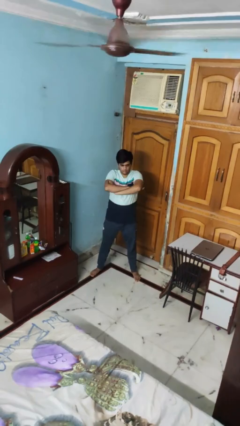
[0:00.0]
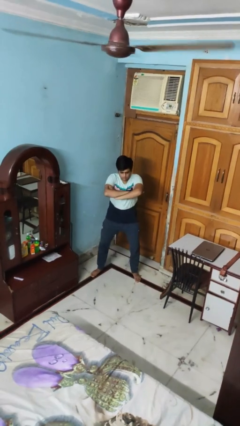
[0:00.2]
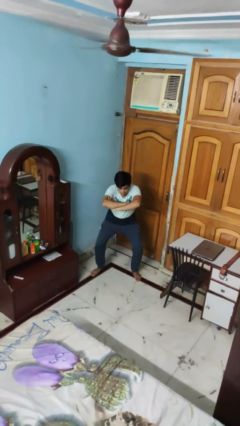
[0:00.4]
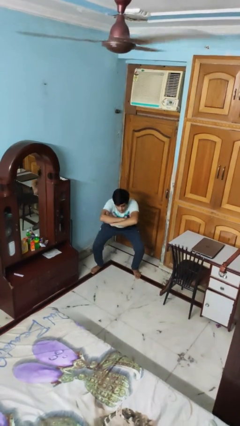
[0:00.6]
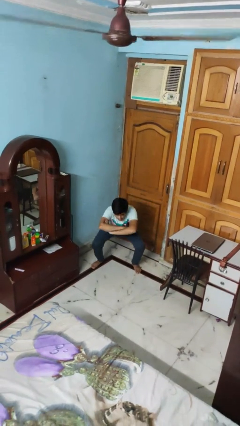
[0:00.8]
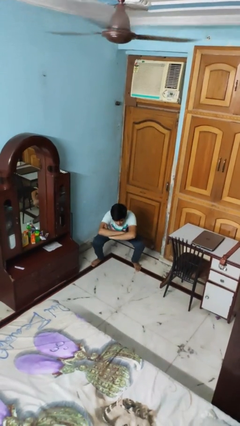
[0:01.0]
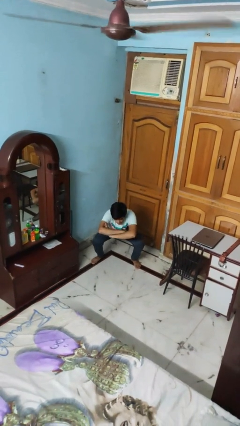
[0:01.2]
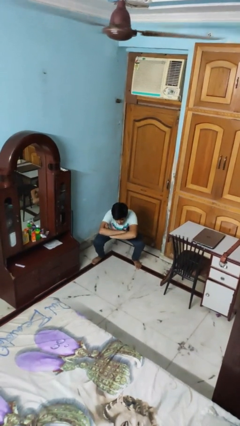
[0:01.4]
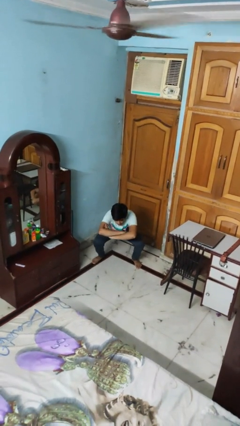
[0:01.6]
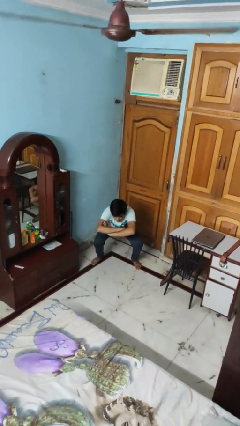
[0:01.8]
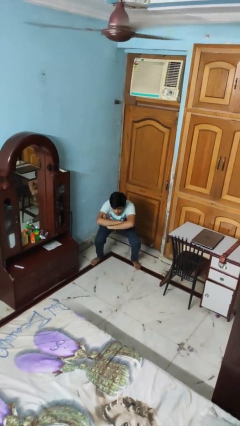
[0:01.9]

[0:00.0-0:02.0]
person squats

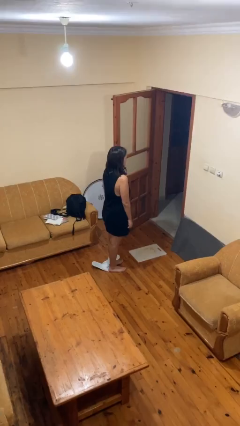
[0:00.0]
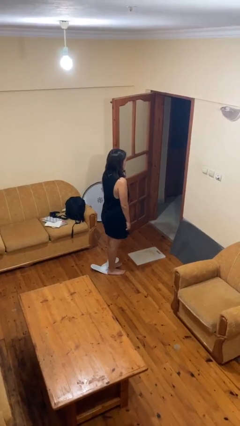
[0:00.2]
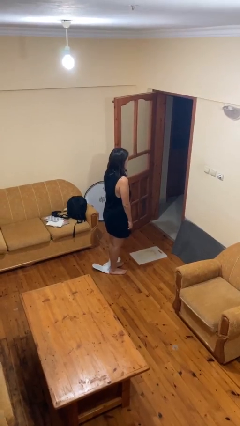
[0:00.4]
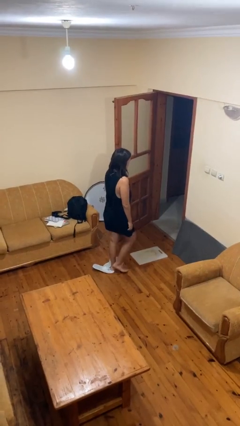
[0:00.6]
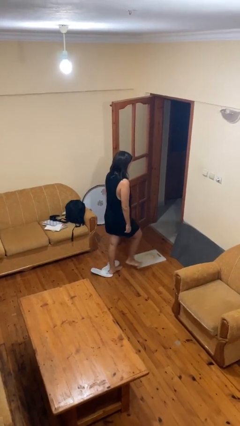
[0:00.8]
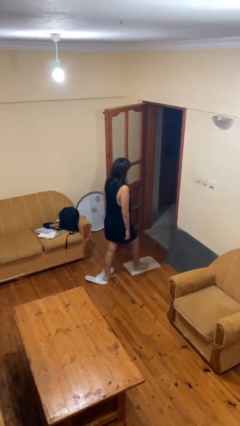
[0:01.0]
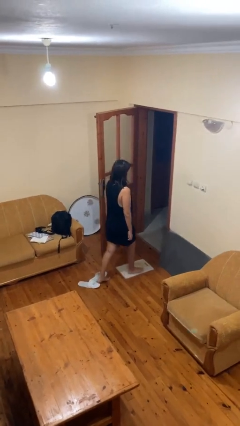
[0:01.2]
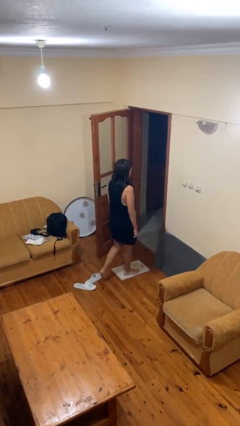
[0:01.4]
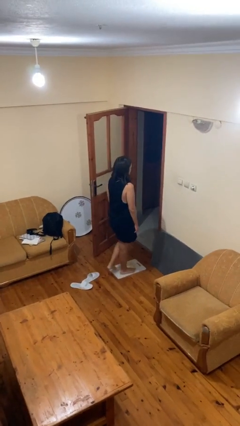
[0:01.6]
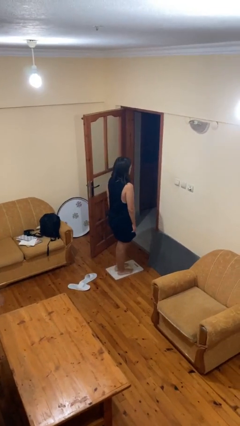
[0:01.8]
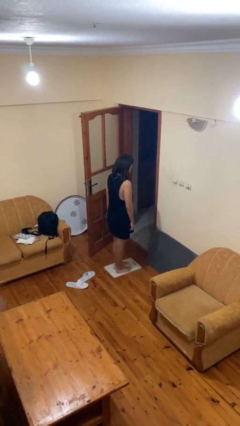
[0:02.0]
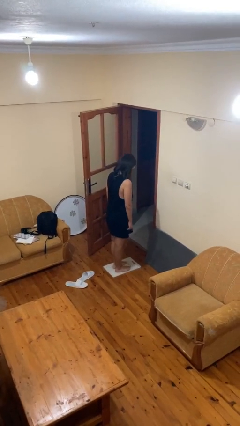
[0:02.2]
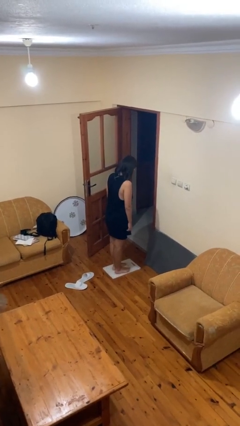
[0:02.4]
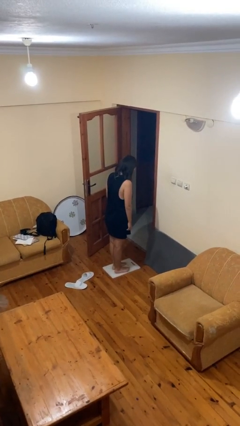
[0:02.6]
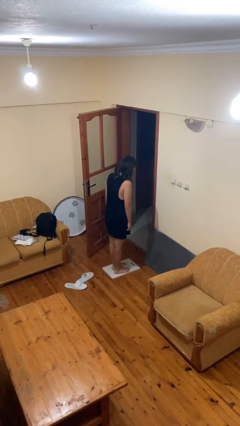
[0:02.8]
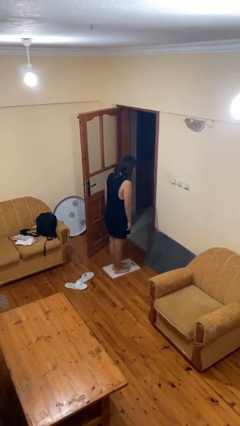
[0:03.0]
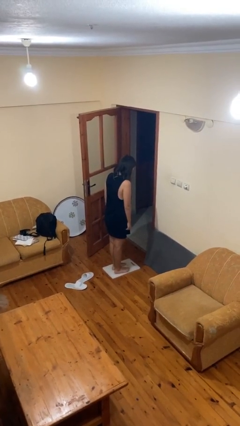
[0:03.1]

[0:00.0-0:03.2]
person uses bodyweight scale

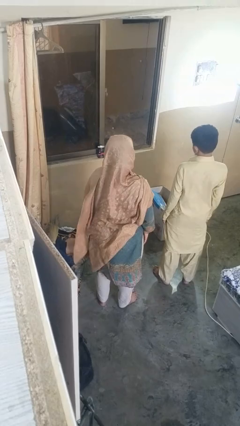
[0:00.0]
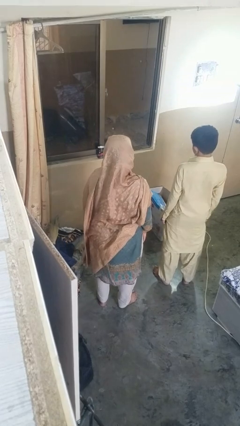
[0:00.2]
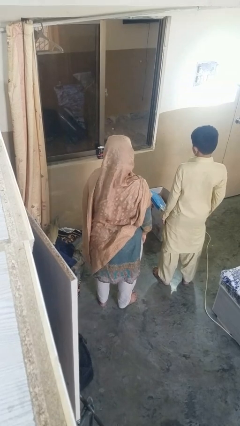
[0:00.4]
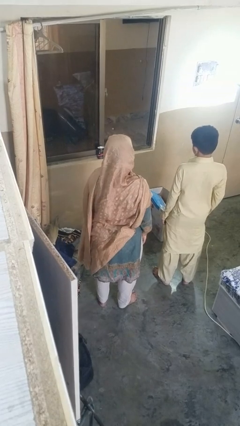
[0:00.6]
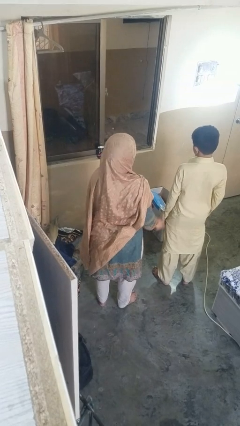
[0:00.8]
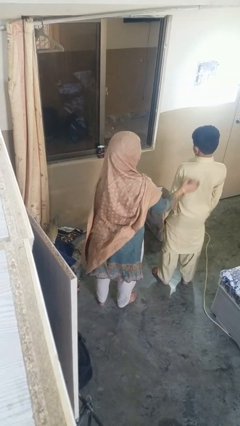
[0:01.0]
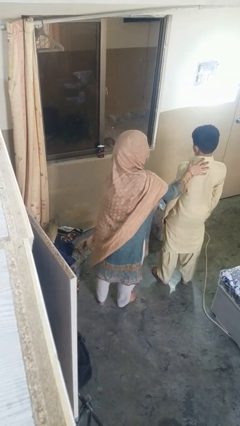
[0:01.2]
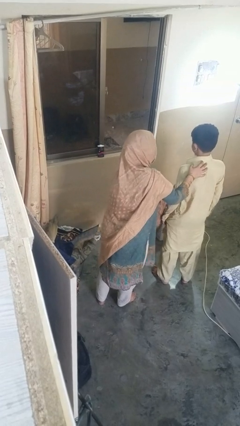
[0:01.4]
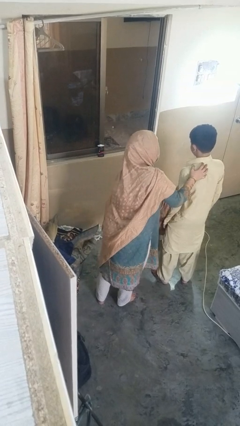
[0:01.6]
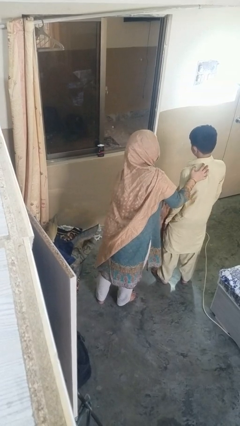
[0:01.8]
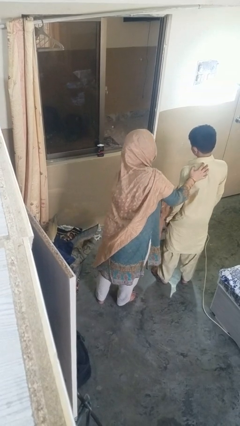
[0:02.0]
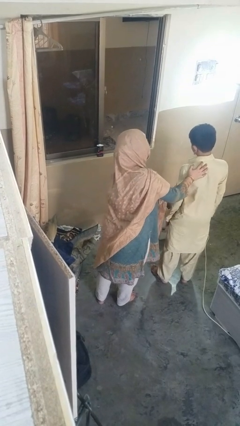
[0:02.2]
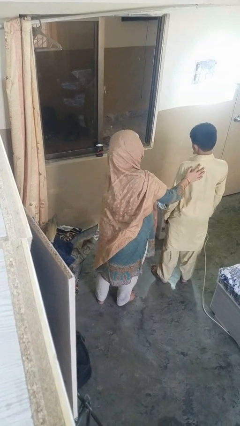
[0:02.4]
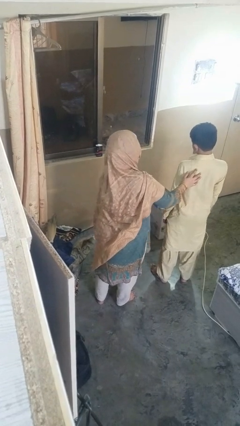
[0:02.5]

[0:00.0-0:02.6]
person laughs with person

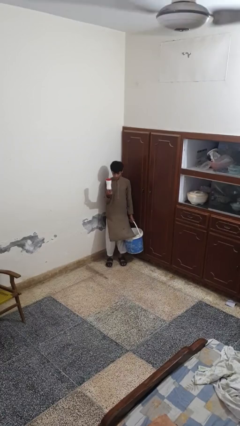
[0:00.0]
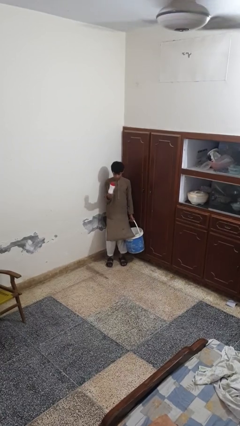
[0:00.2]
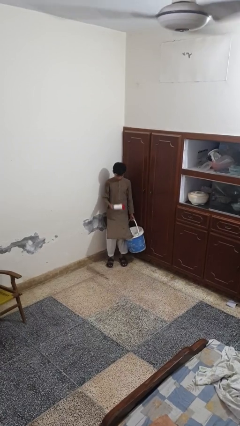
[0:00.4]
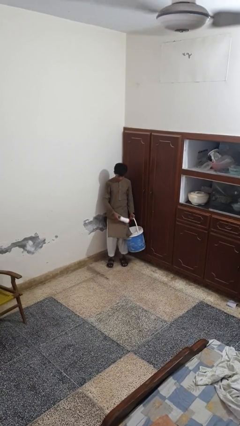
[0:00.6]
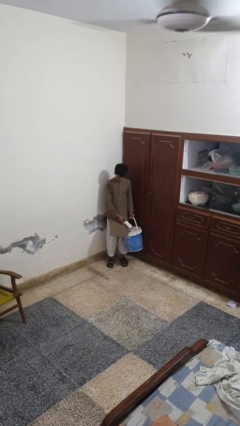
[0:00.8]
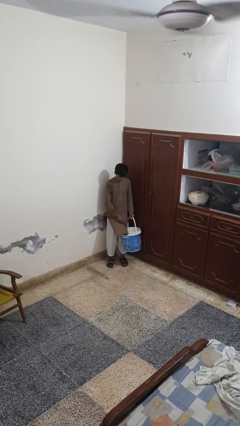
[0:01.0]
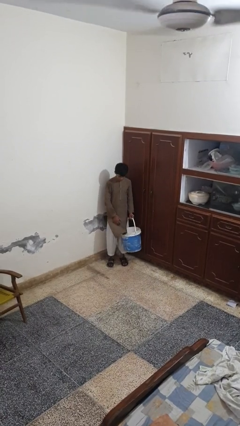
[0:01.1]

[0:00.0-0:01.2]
person puts object into basket

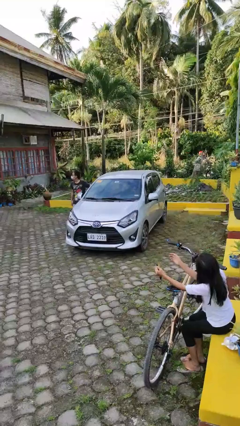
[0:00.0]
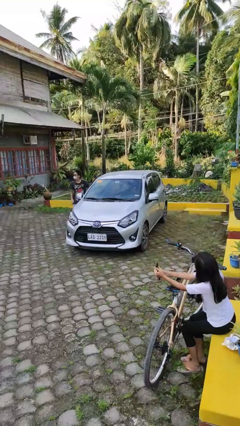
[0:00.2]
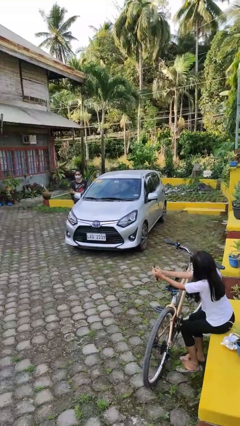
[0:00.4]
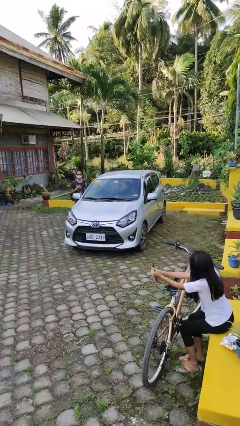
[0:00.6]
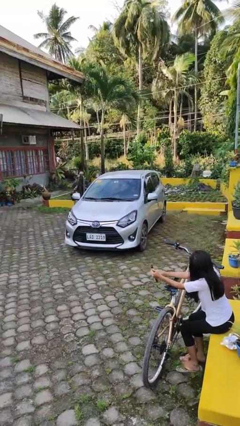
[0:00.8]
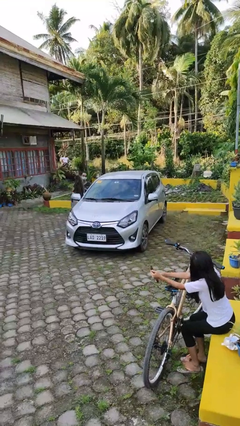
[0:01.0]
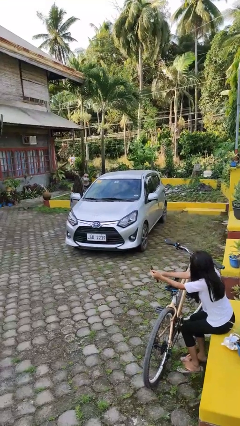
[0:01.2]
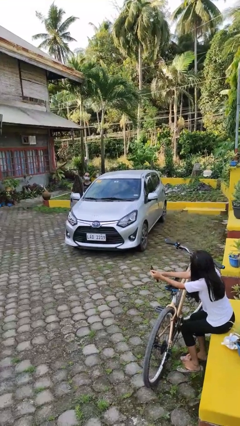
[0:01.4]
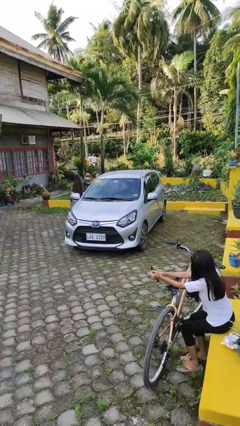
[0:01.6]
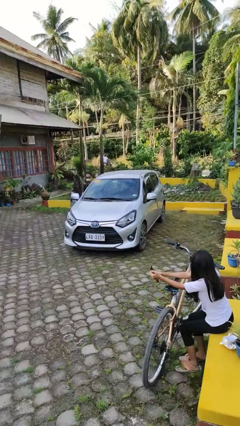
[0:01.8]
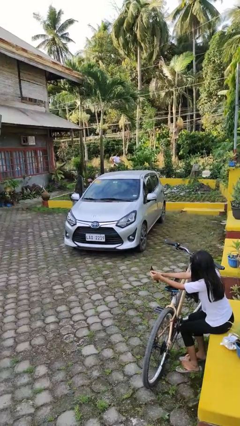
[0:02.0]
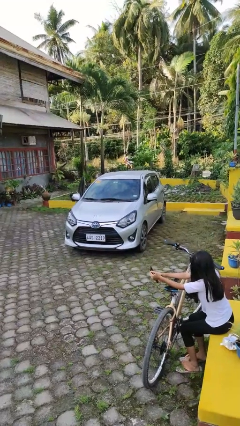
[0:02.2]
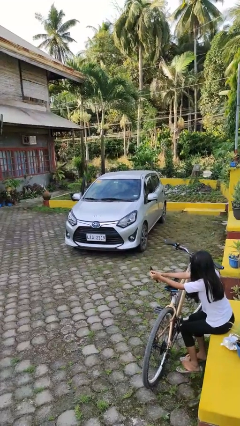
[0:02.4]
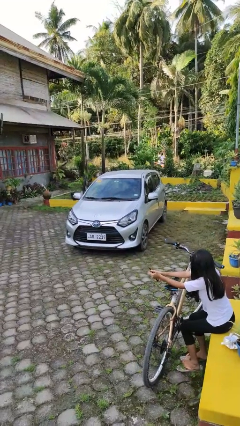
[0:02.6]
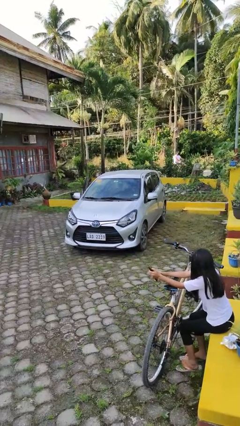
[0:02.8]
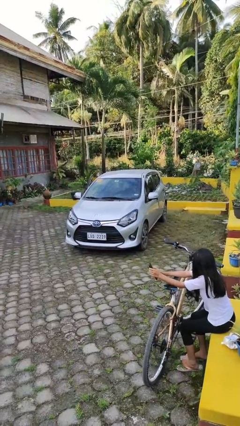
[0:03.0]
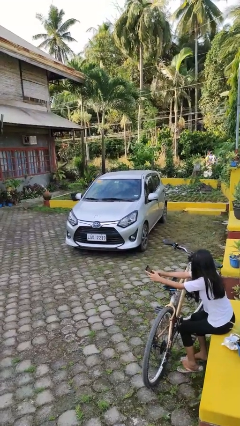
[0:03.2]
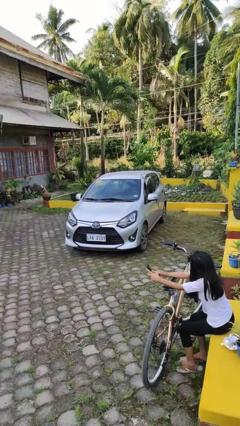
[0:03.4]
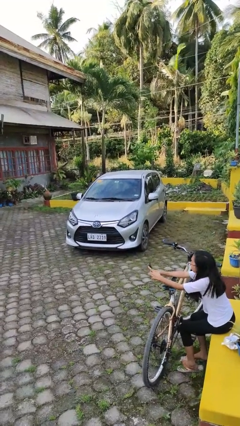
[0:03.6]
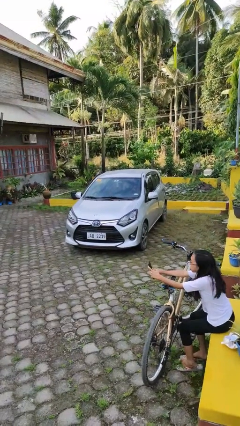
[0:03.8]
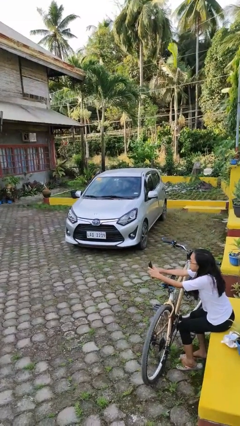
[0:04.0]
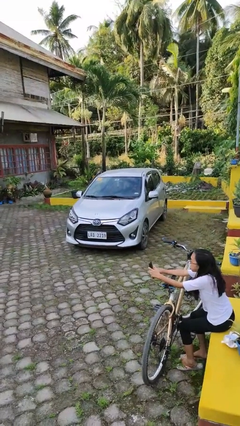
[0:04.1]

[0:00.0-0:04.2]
car picks up person

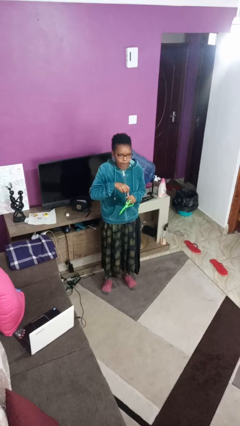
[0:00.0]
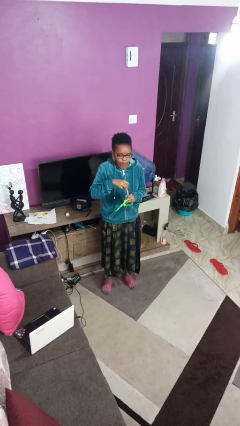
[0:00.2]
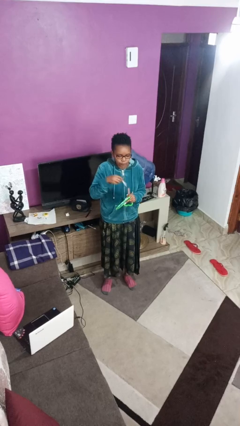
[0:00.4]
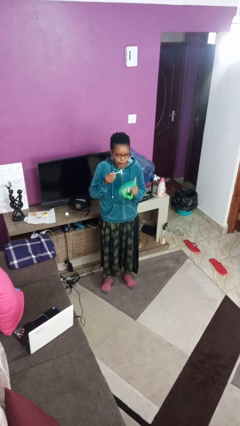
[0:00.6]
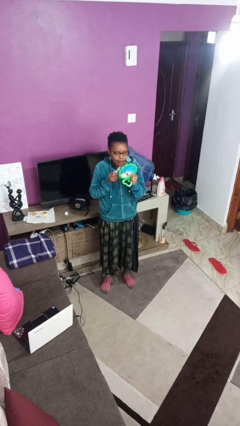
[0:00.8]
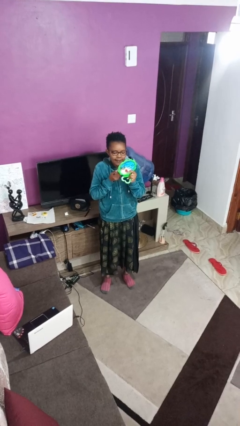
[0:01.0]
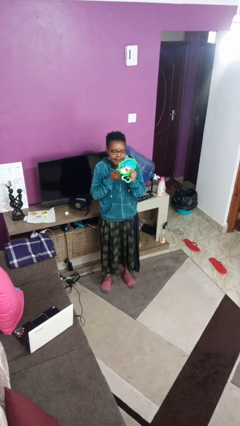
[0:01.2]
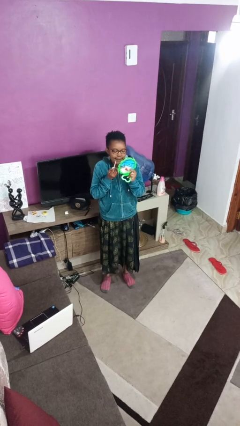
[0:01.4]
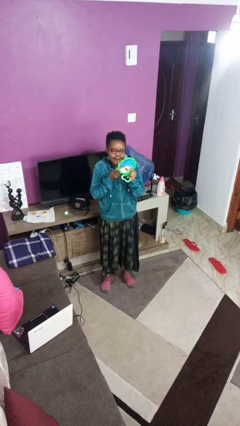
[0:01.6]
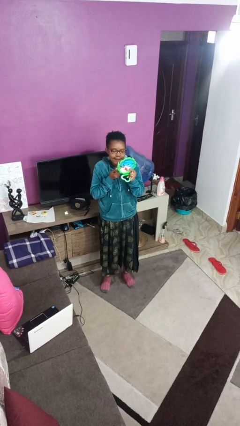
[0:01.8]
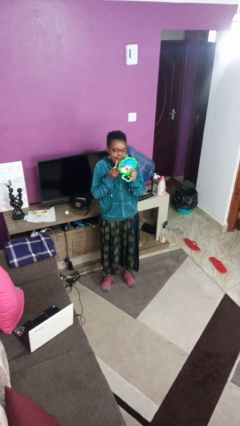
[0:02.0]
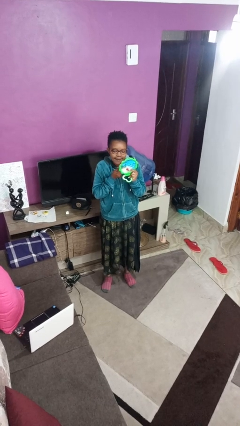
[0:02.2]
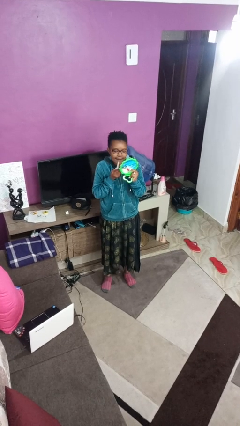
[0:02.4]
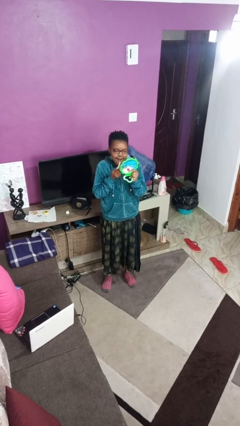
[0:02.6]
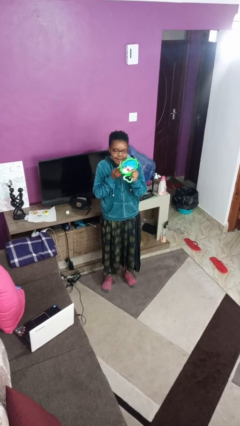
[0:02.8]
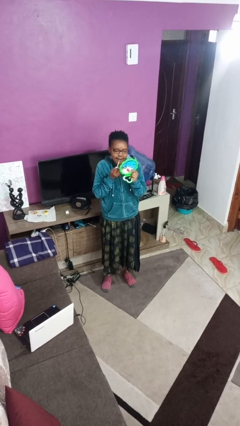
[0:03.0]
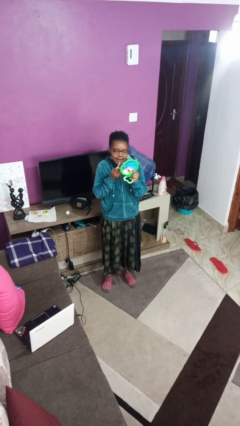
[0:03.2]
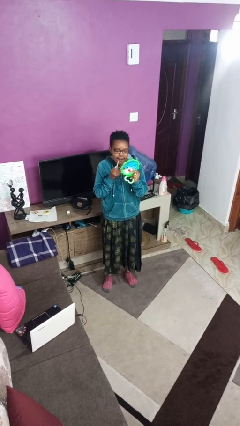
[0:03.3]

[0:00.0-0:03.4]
person applies lip makeup

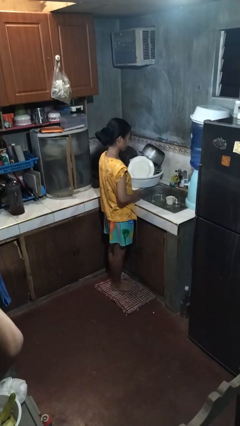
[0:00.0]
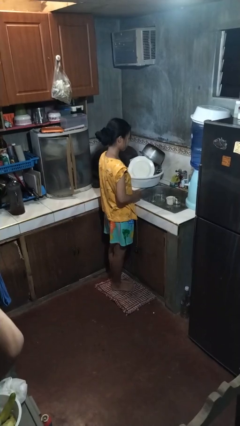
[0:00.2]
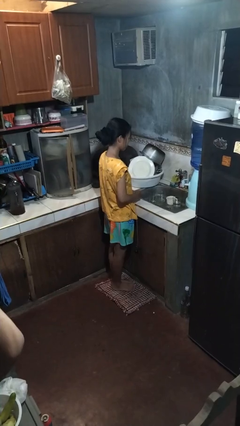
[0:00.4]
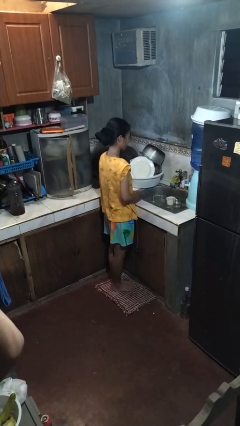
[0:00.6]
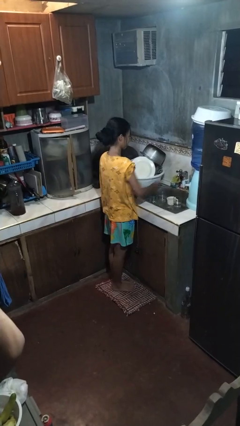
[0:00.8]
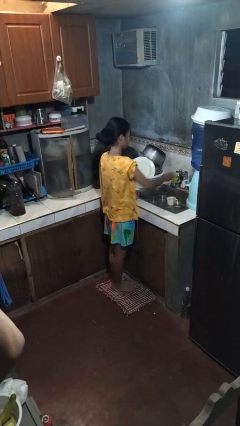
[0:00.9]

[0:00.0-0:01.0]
person turns on faucet
